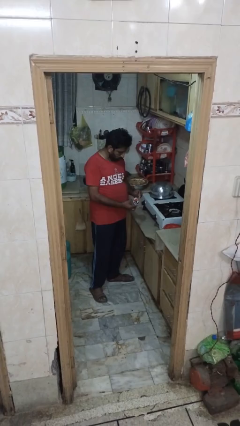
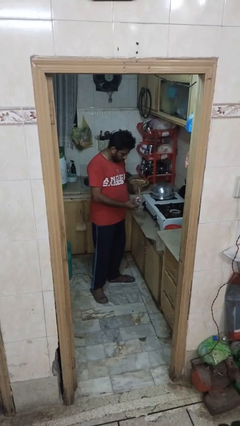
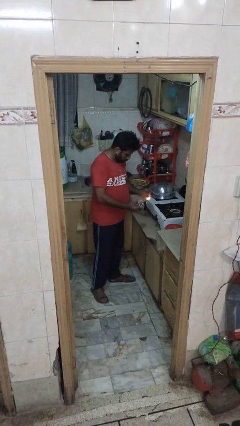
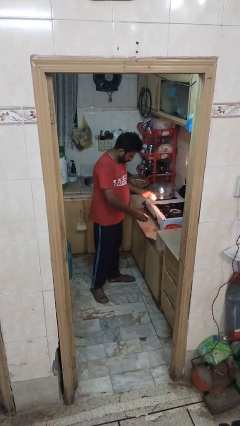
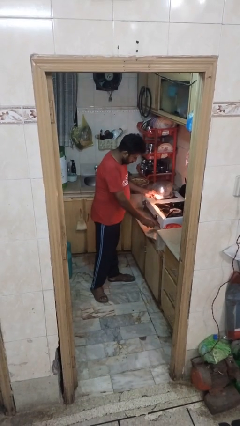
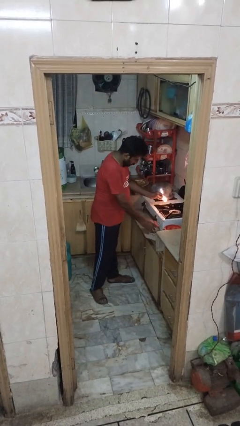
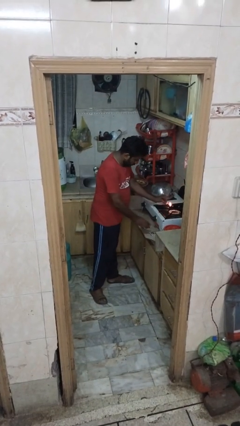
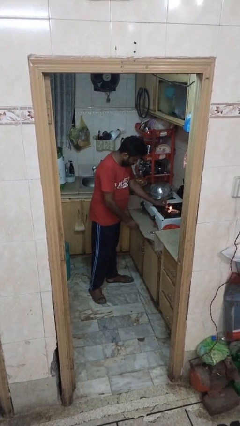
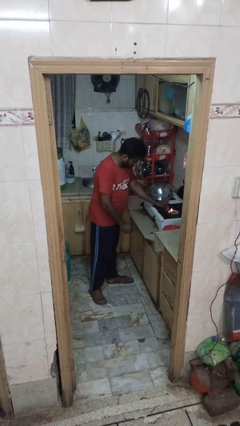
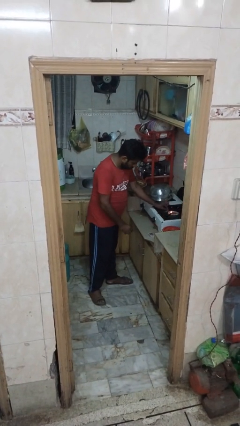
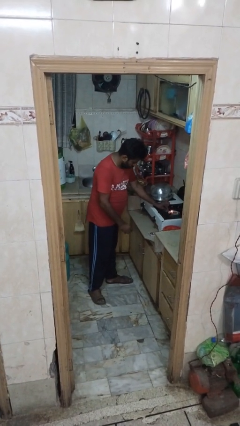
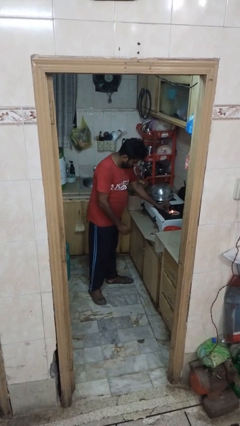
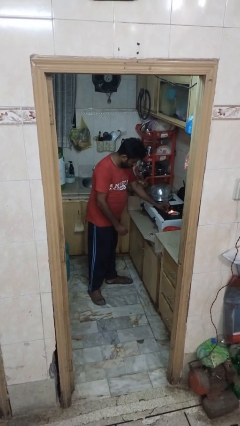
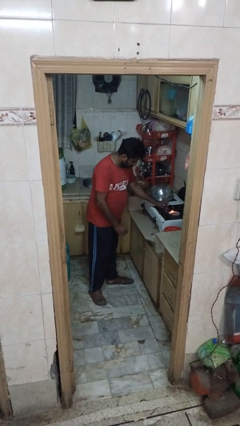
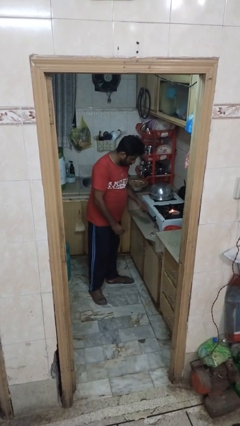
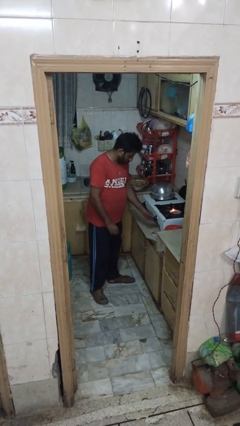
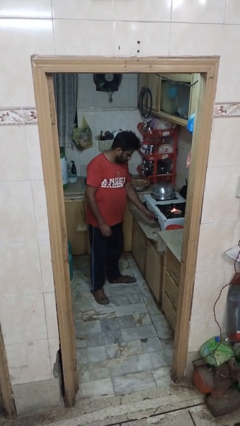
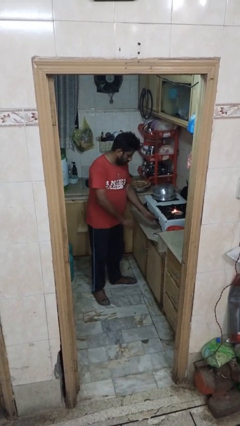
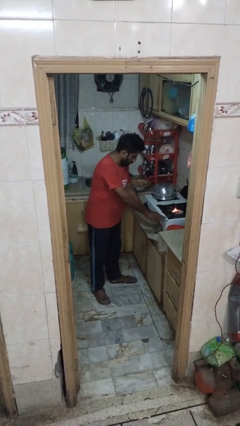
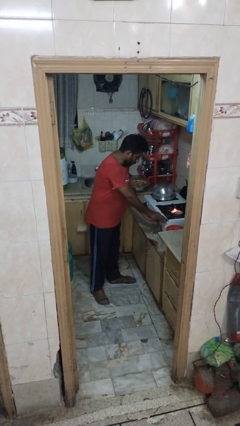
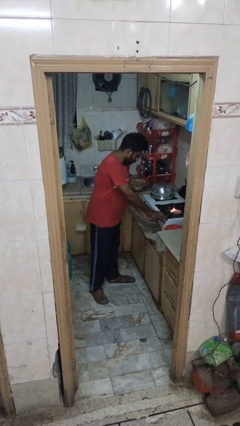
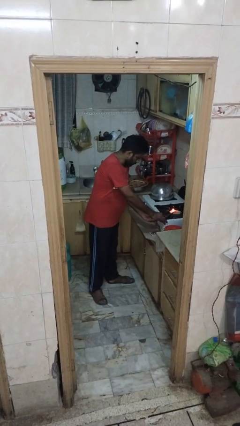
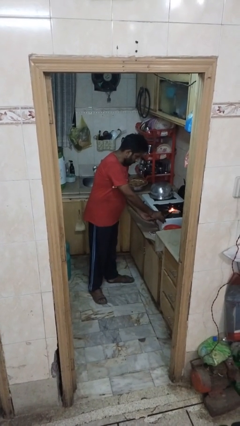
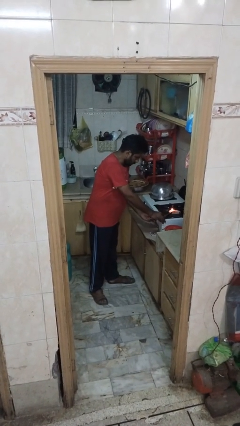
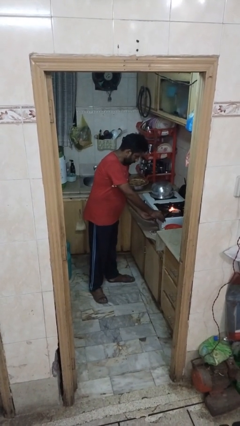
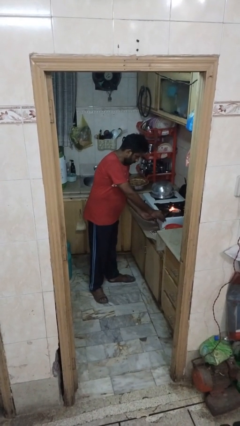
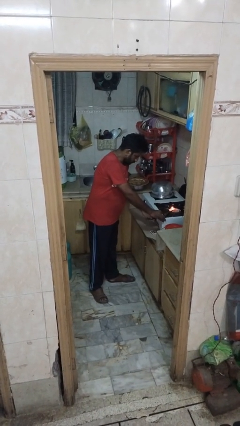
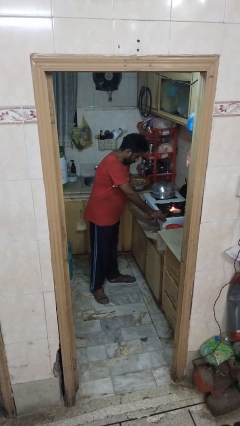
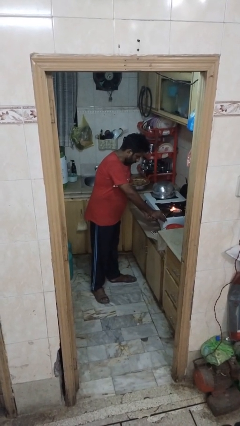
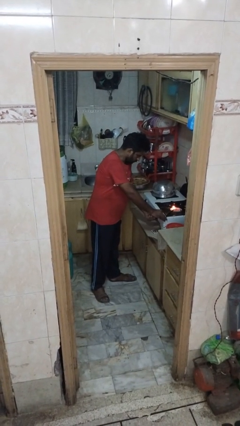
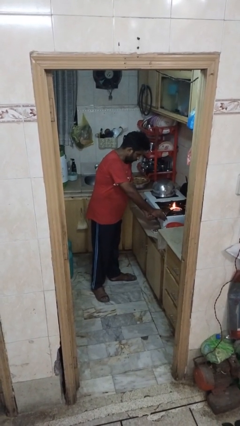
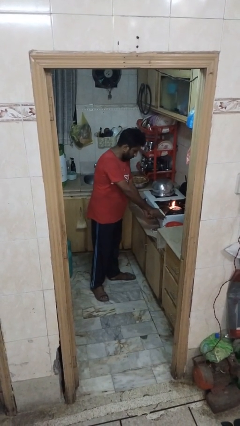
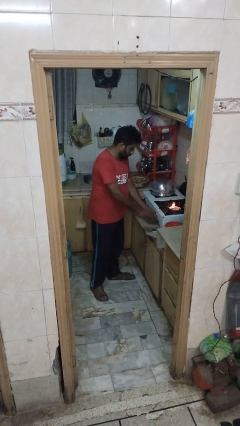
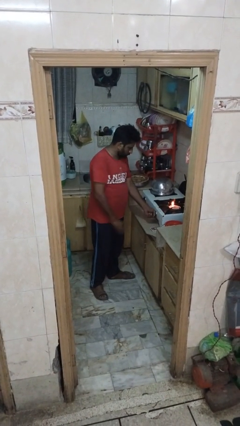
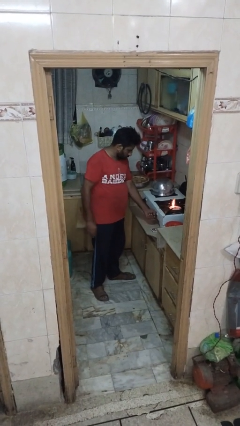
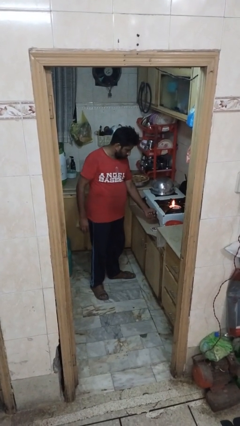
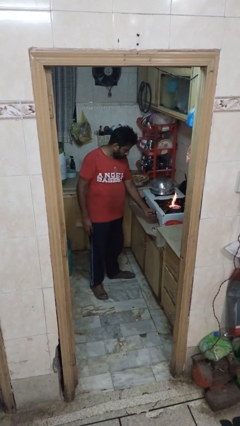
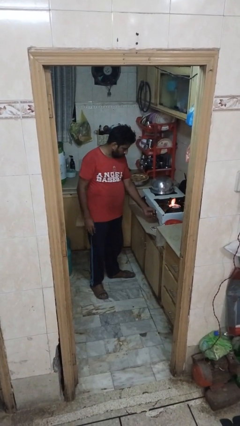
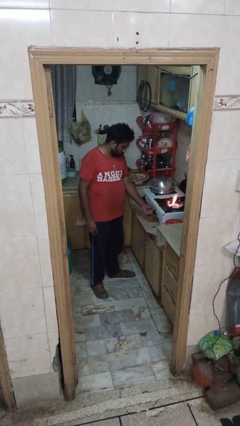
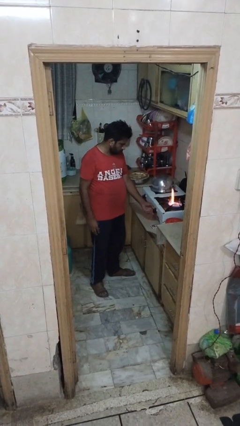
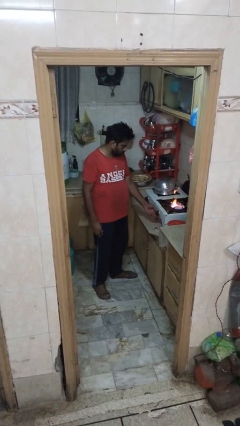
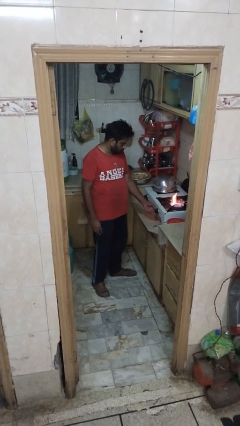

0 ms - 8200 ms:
person turns on stovetop

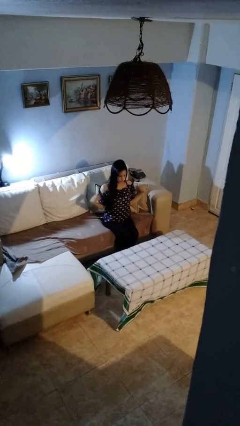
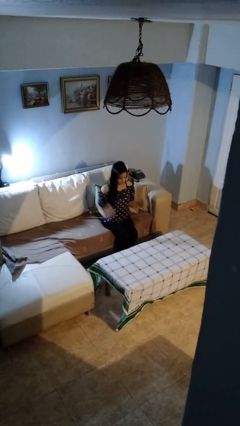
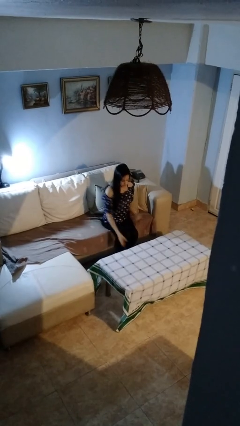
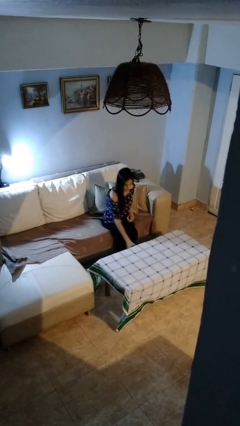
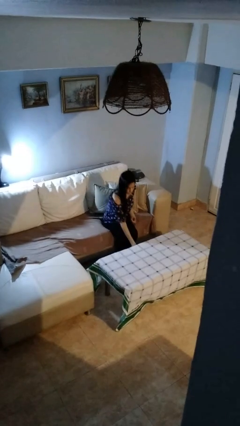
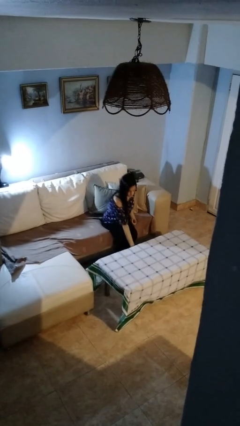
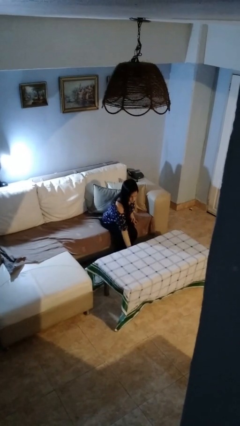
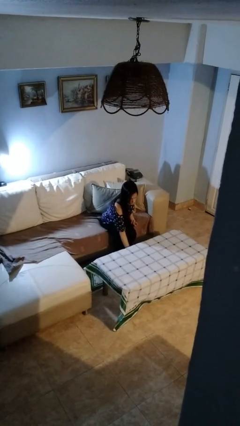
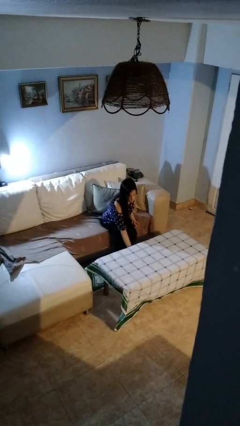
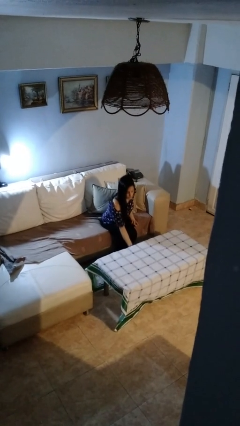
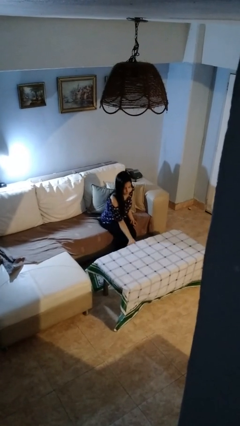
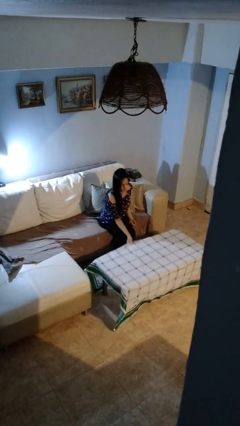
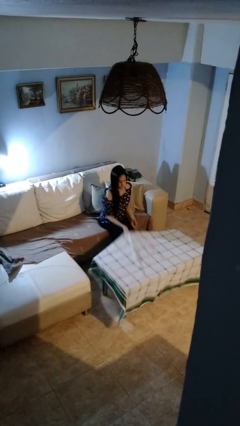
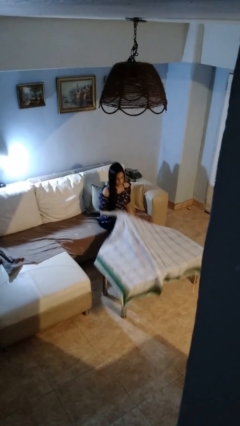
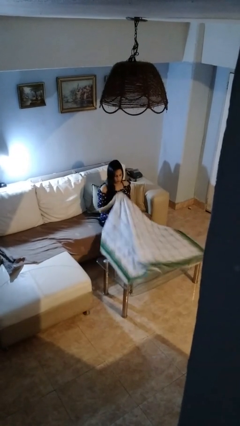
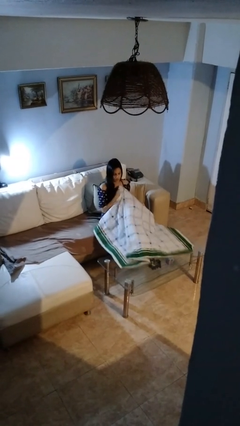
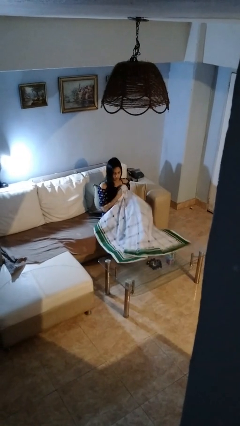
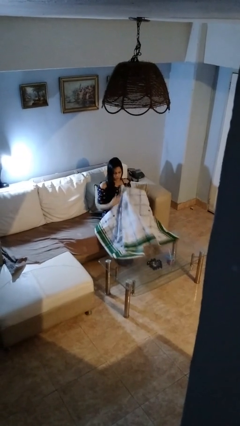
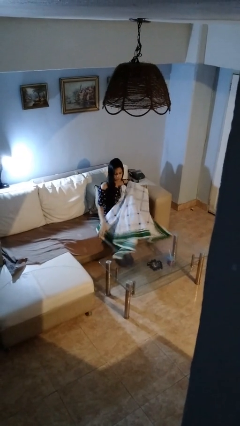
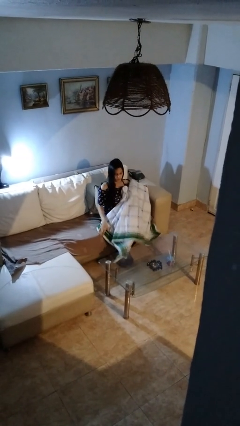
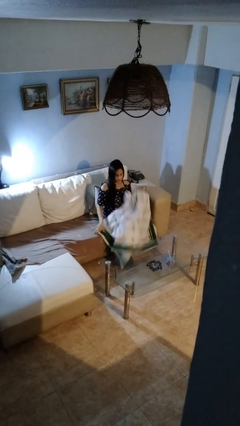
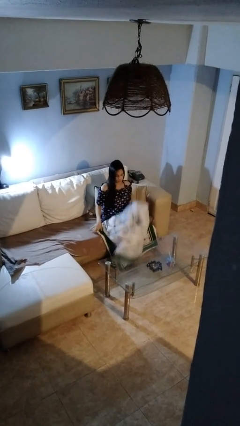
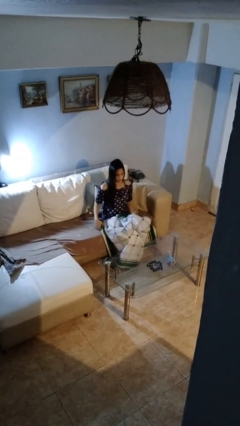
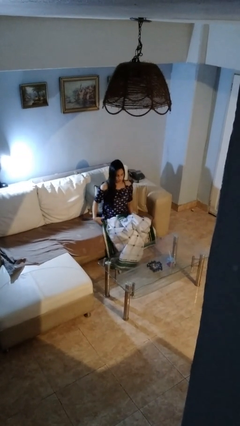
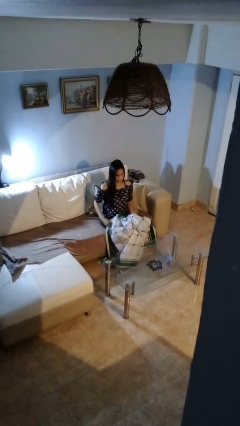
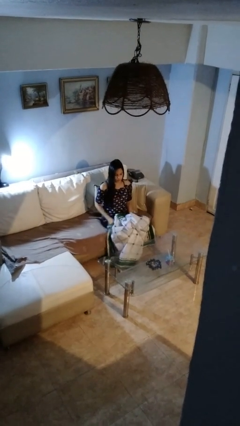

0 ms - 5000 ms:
person folds tablecloth

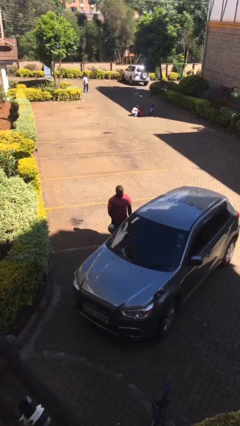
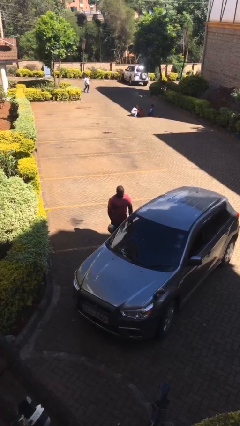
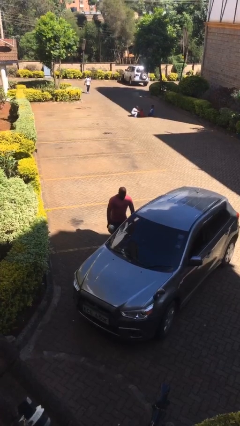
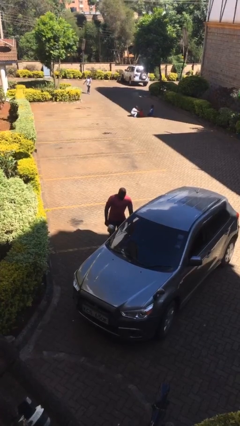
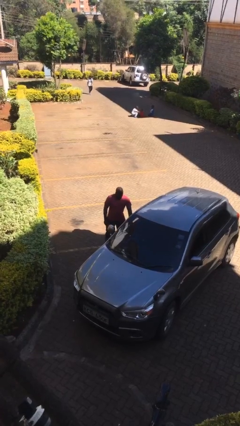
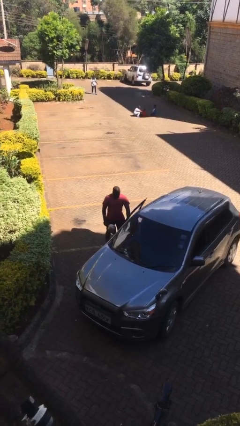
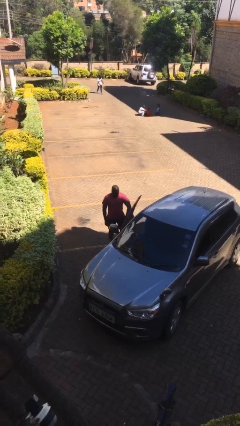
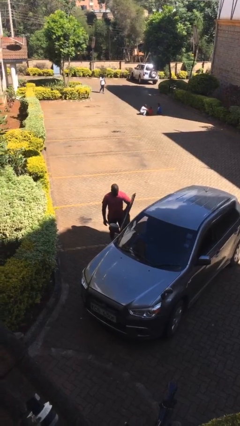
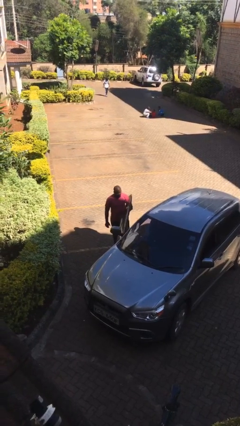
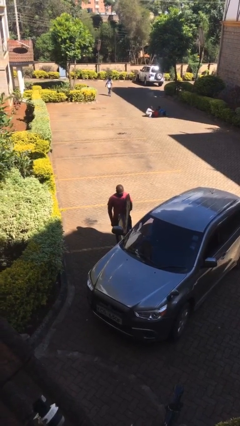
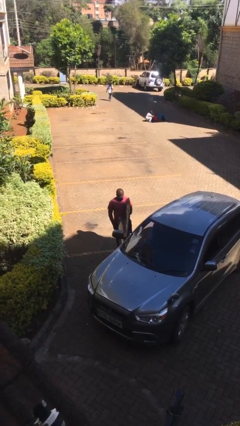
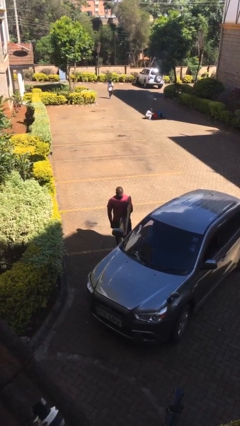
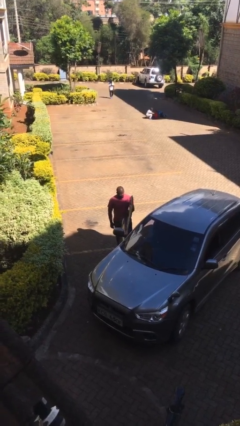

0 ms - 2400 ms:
person opens car door

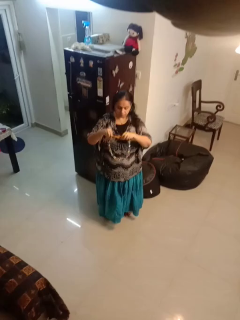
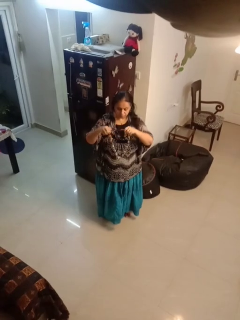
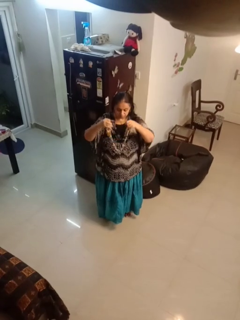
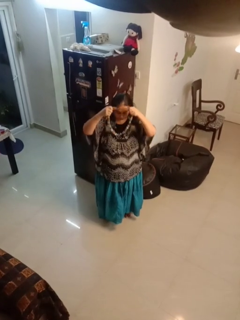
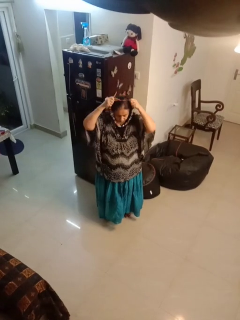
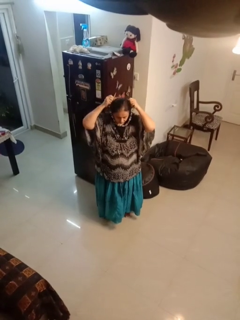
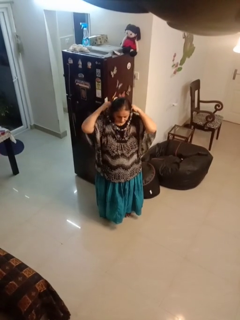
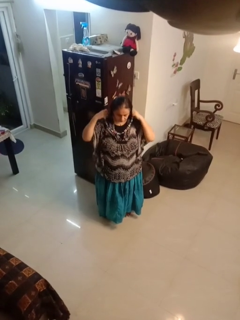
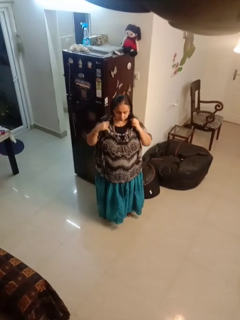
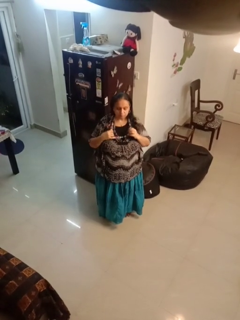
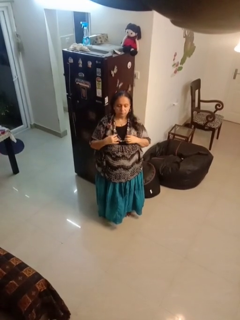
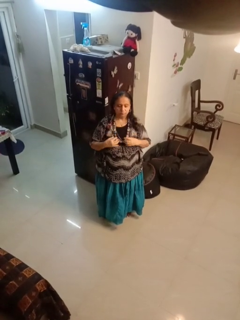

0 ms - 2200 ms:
person puts on necklace

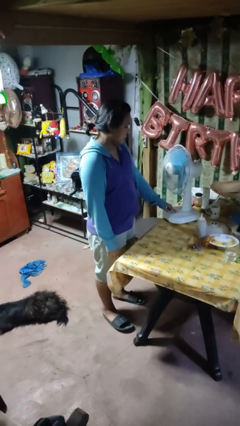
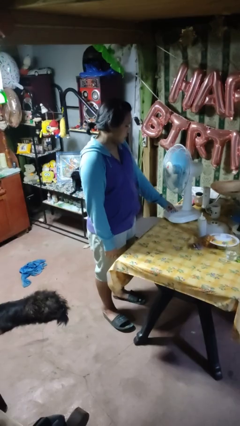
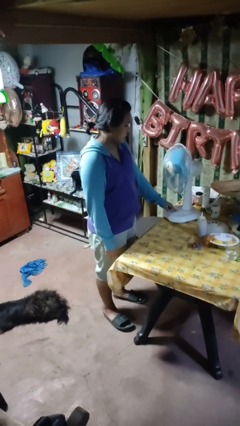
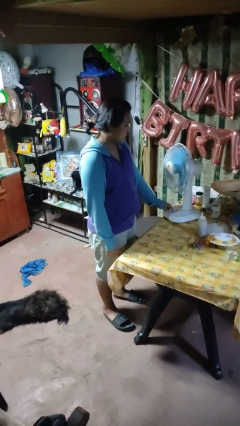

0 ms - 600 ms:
person turns on fan
